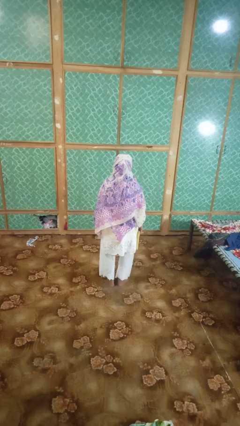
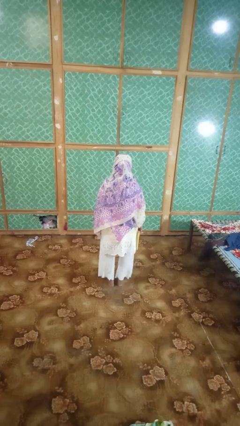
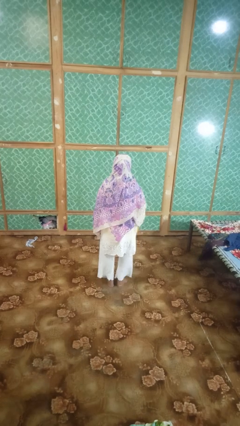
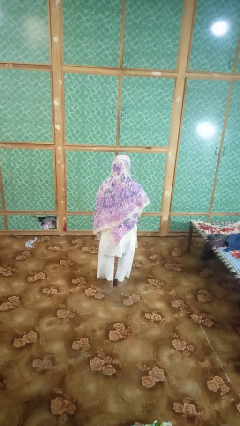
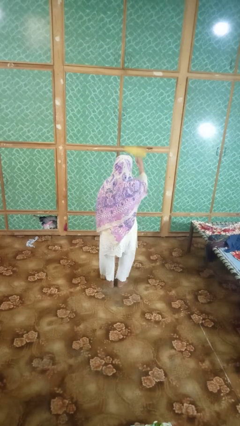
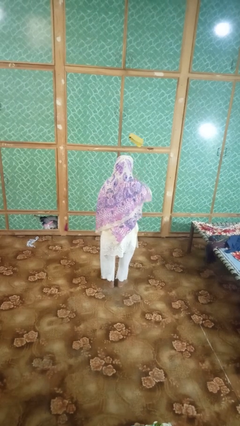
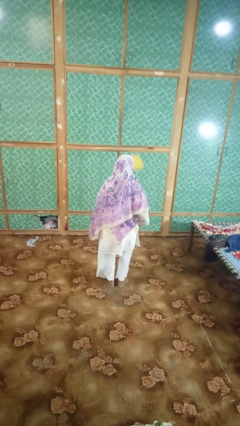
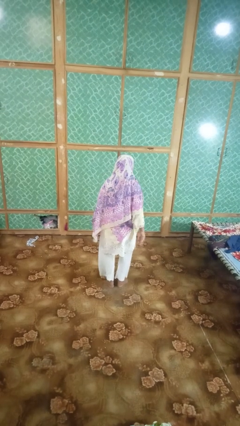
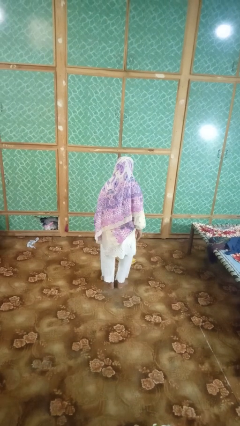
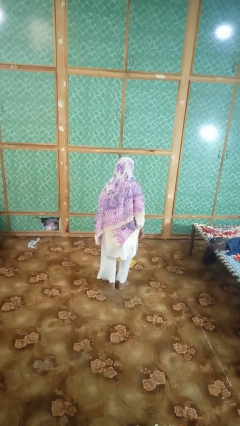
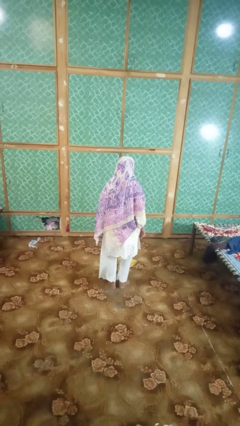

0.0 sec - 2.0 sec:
person throws object into air

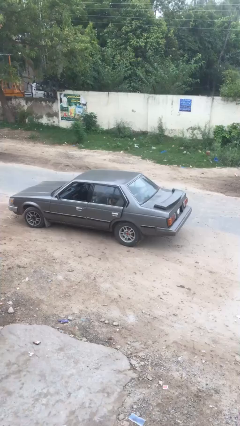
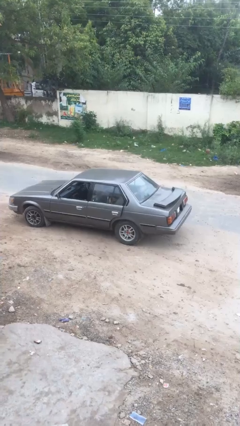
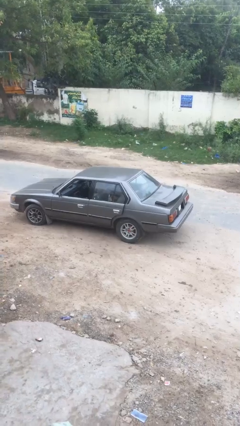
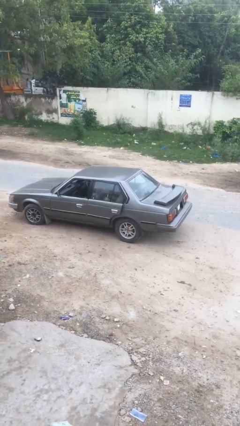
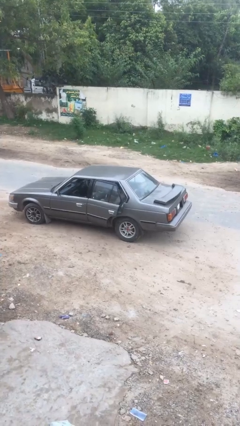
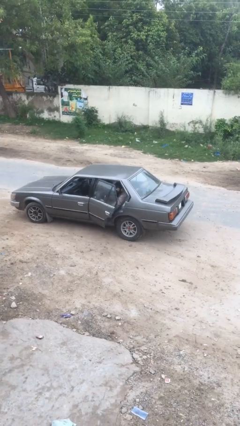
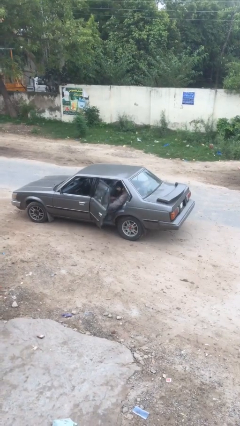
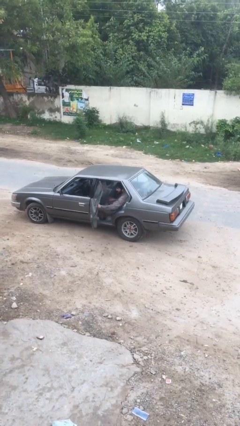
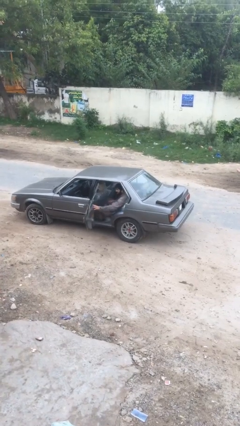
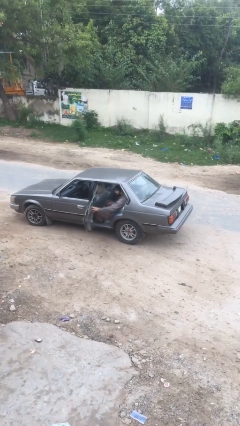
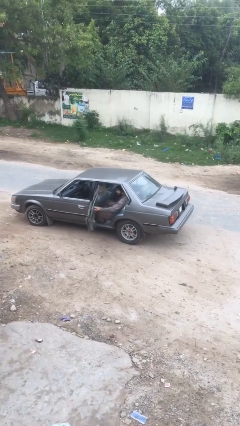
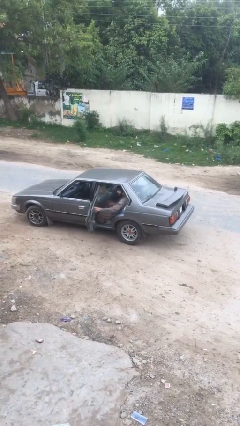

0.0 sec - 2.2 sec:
person opens car door

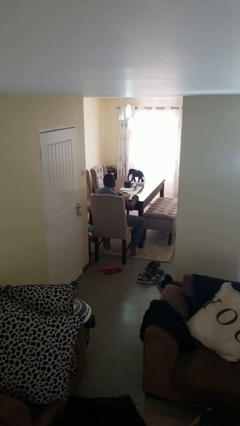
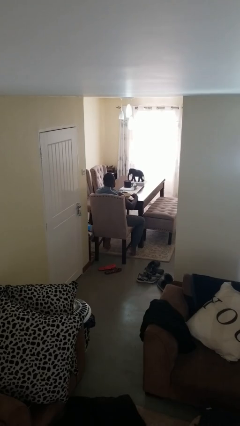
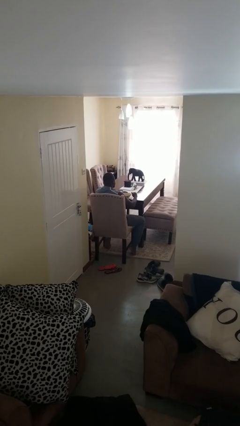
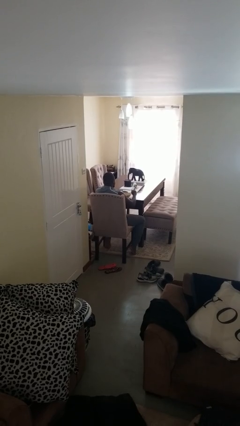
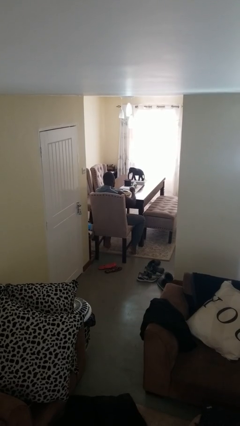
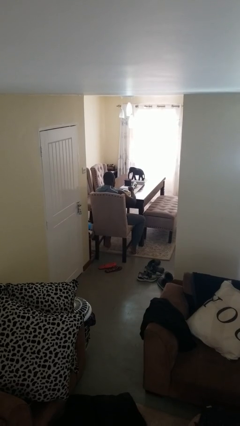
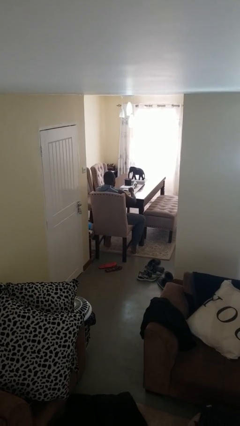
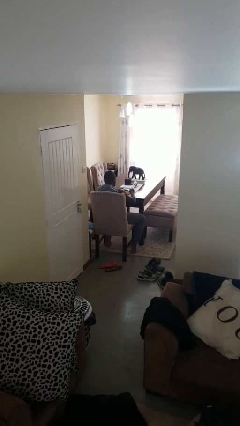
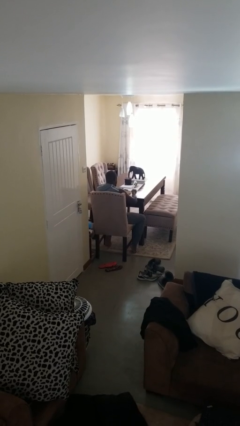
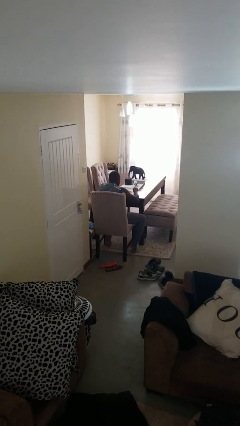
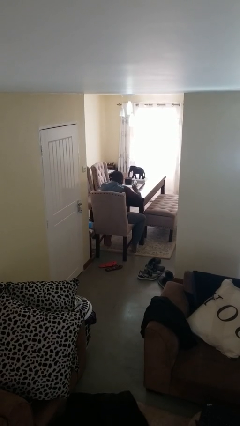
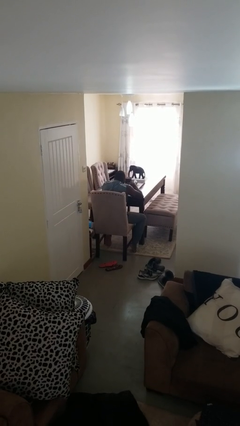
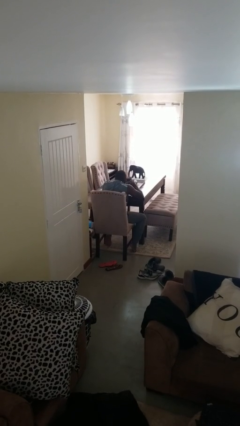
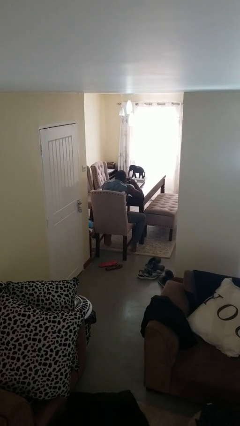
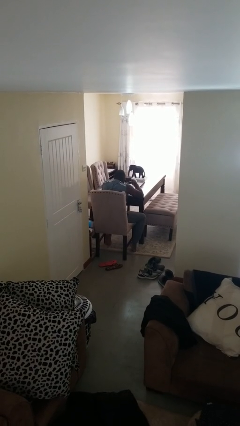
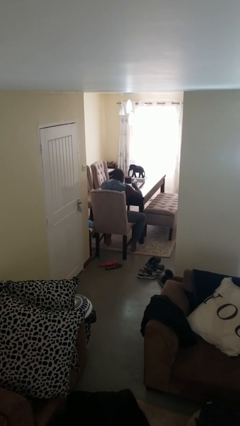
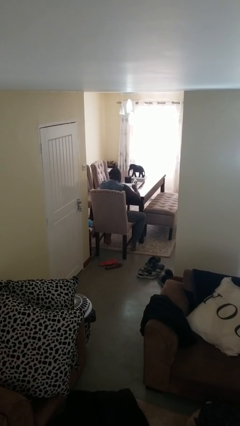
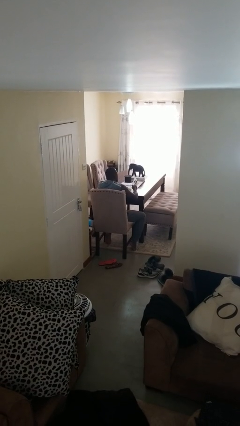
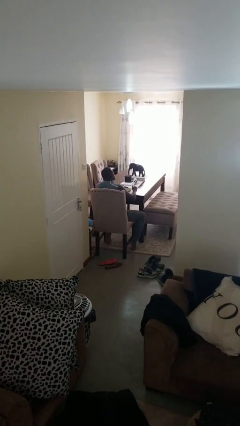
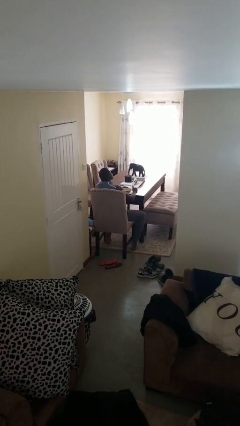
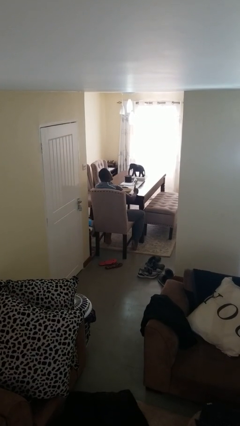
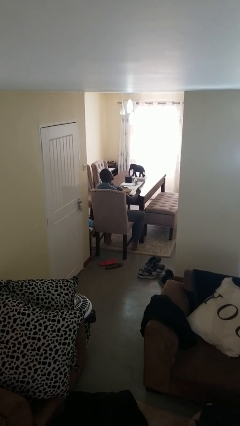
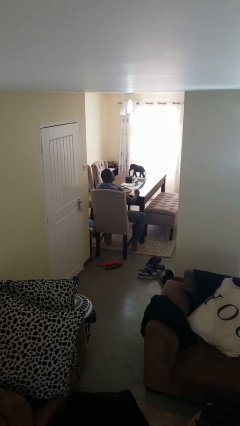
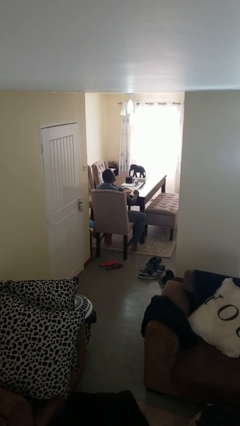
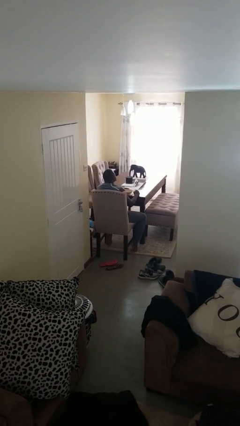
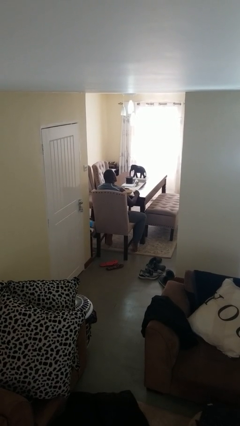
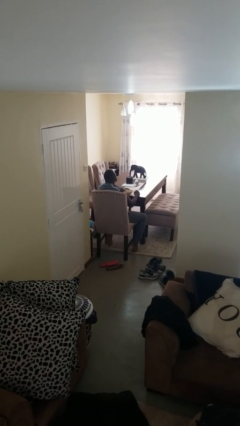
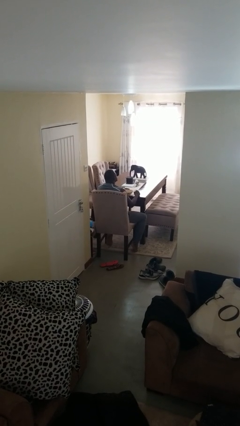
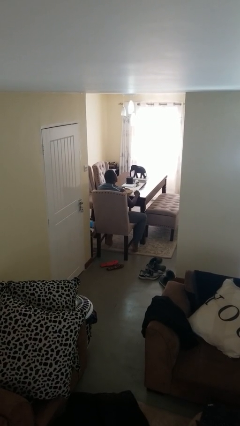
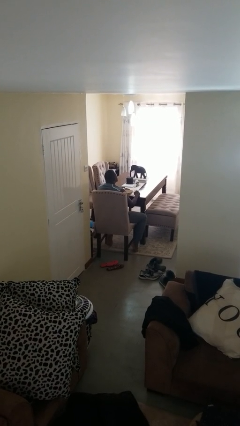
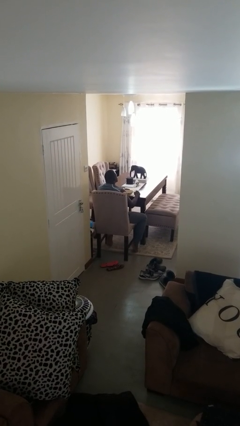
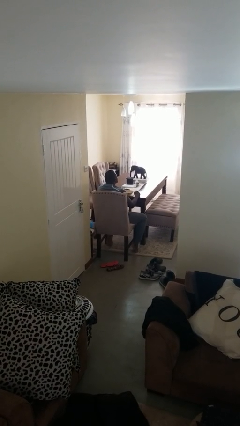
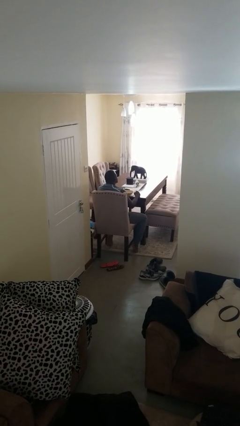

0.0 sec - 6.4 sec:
person eats with utensil

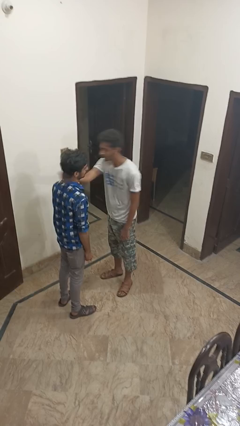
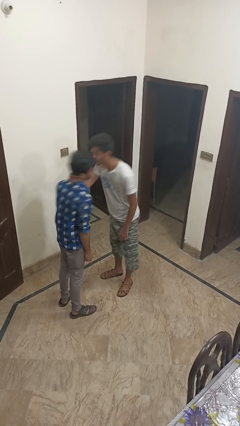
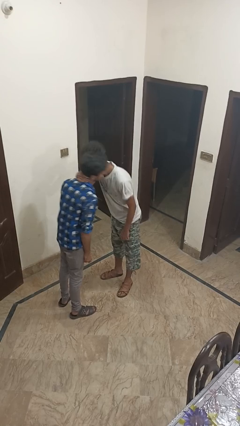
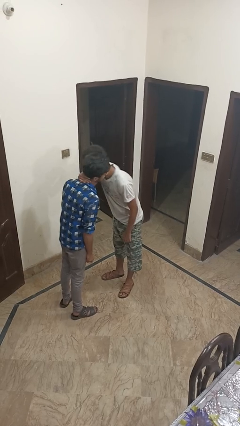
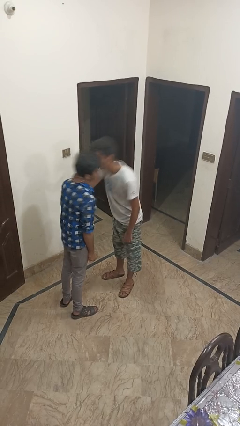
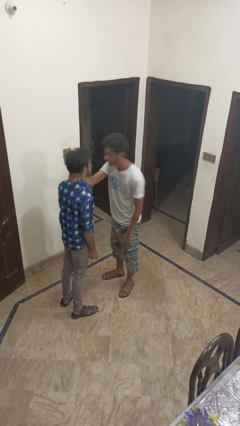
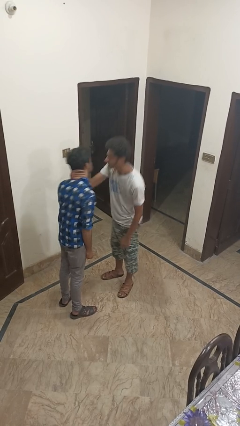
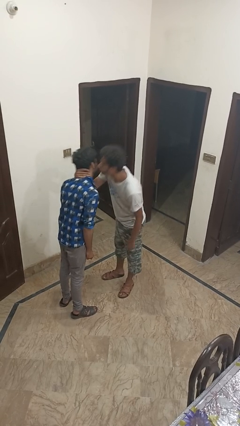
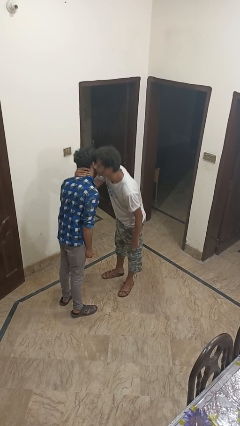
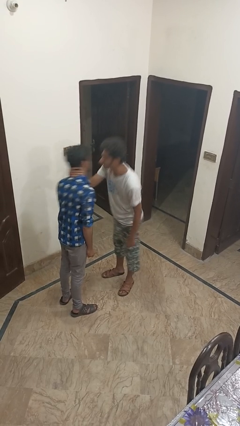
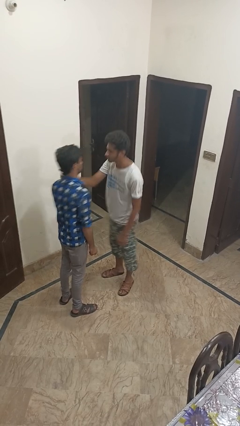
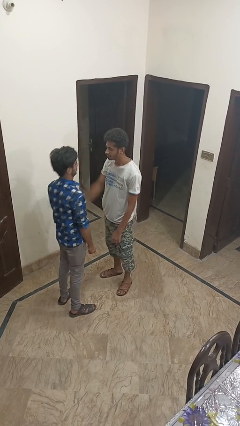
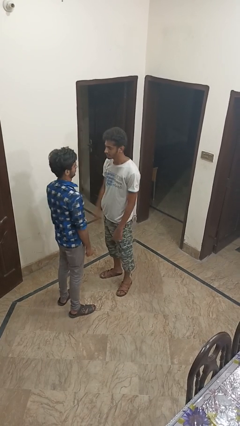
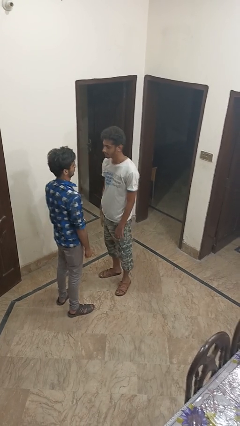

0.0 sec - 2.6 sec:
person kisses cheek of person

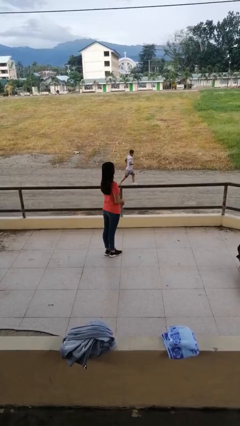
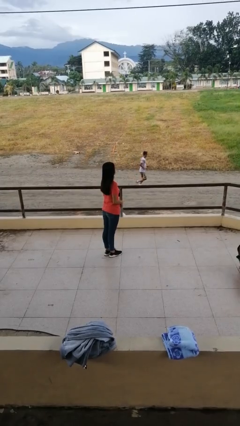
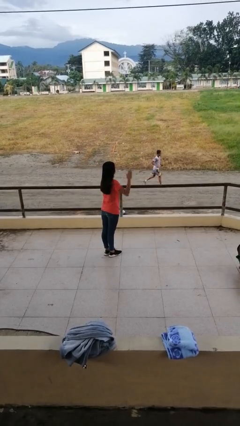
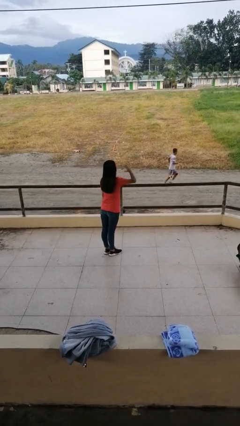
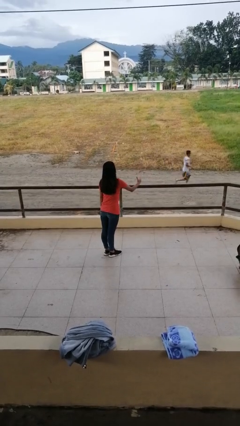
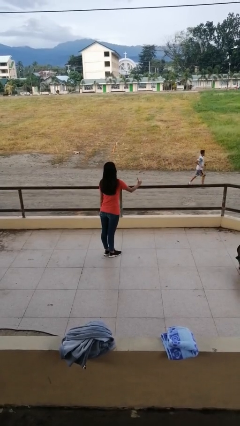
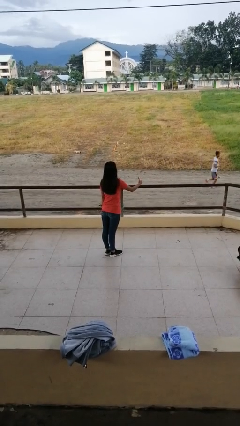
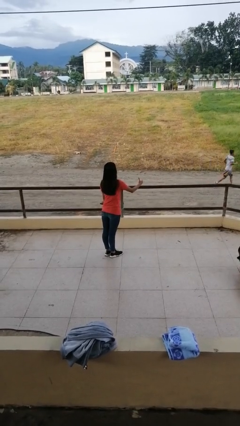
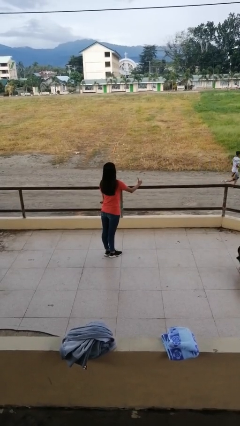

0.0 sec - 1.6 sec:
person karate chop

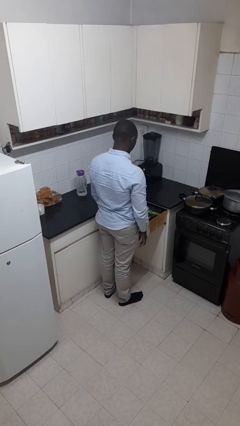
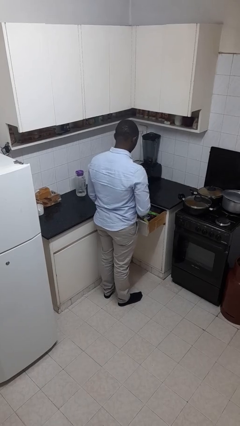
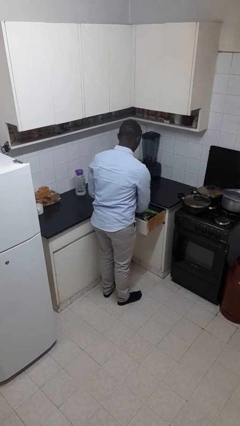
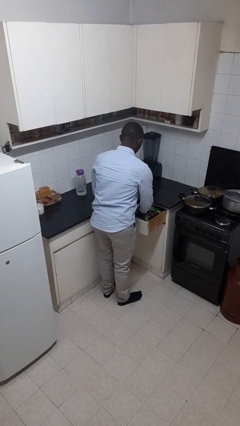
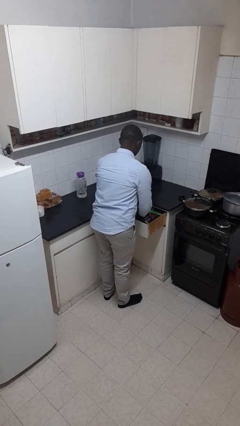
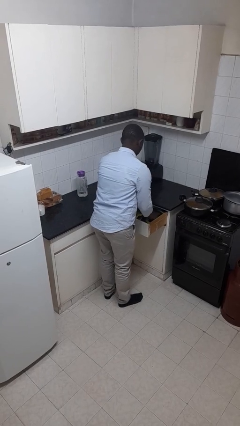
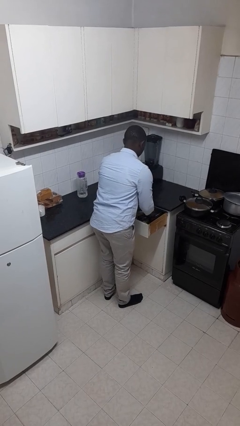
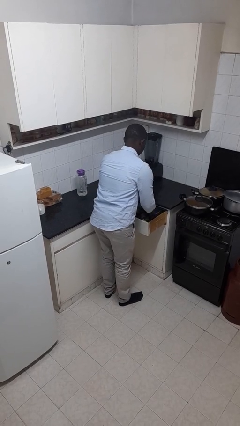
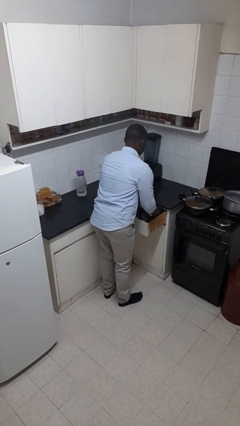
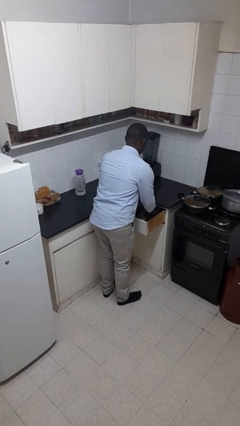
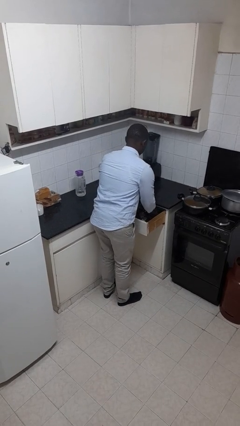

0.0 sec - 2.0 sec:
person searches in kitchen drawer

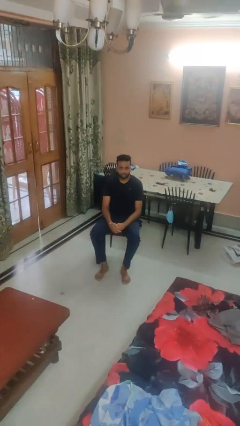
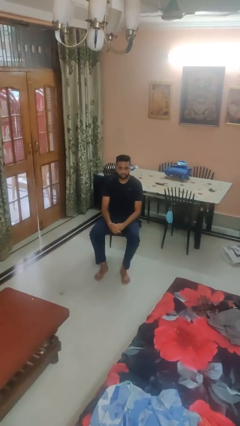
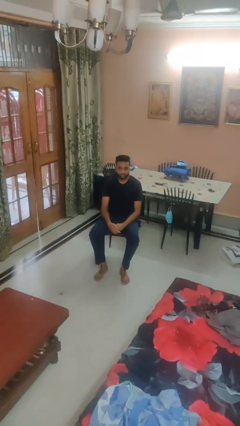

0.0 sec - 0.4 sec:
person sticks out tongue
